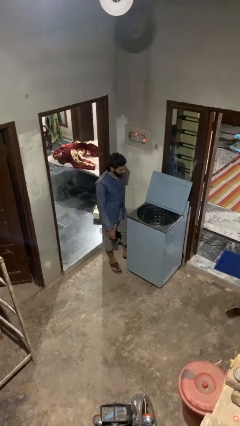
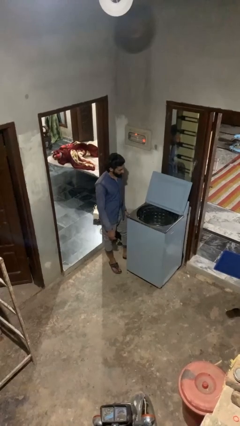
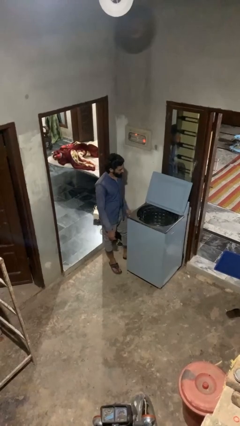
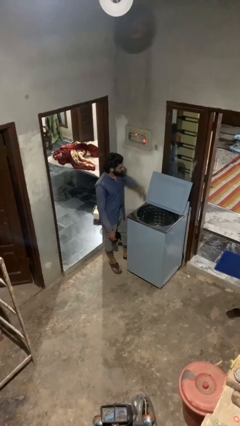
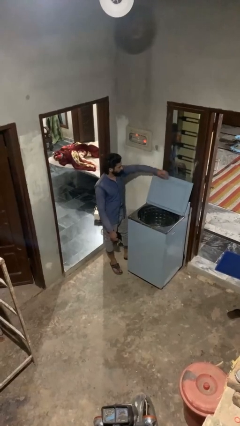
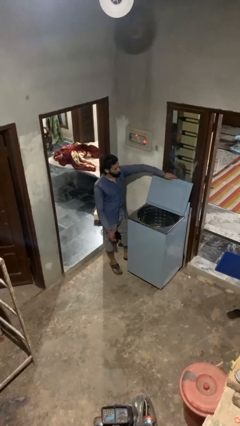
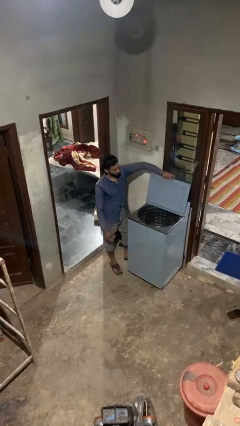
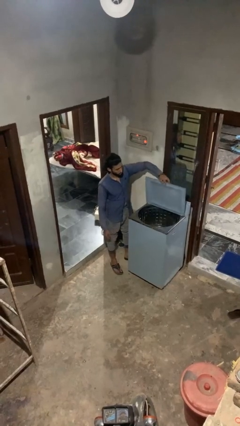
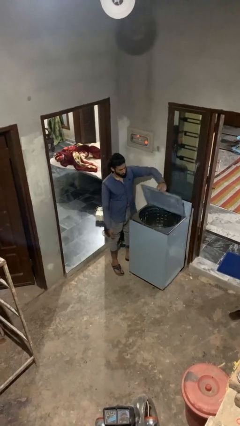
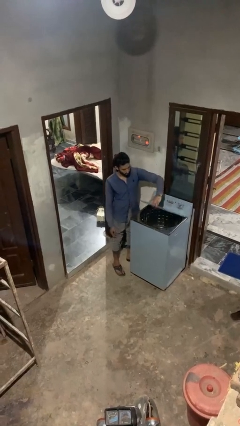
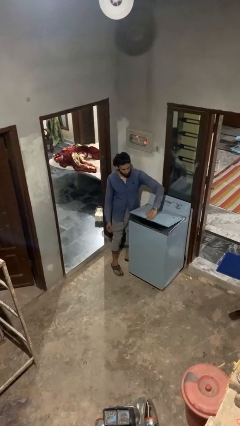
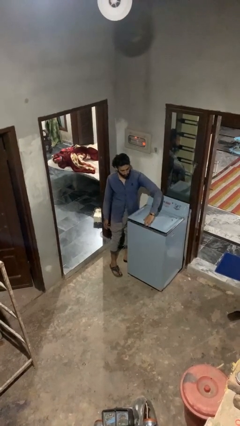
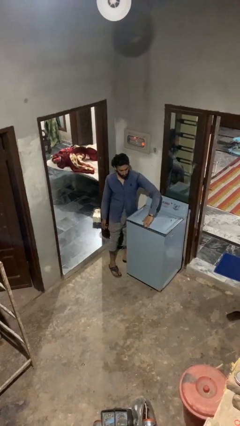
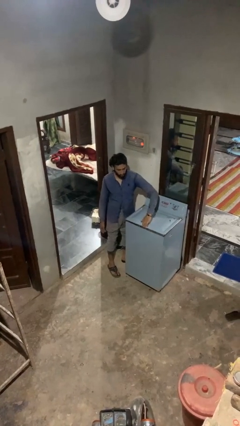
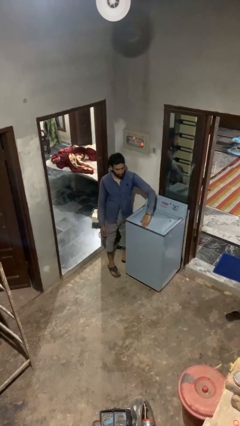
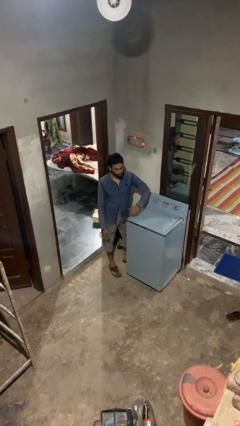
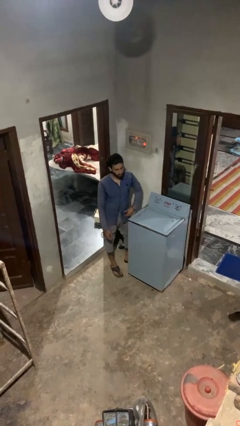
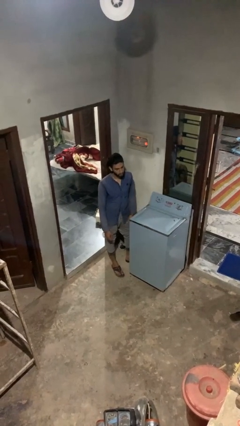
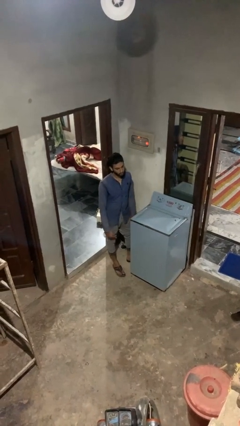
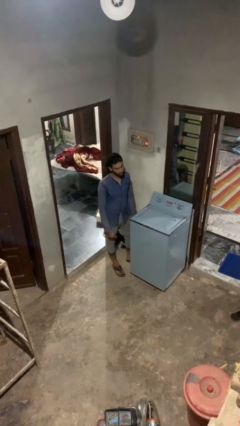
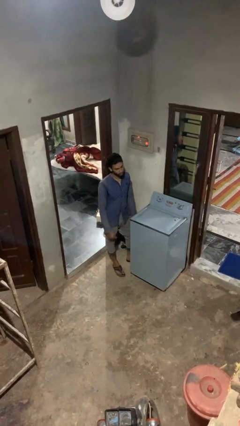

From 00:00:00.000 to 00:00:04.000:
person closes clothes washer

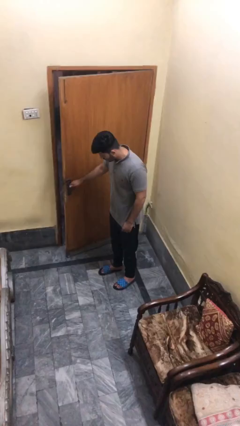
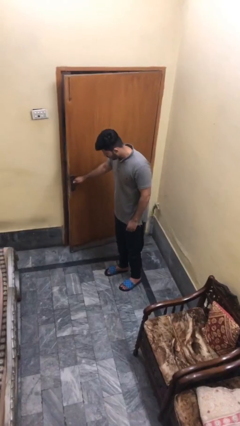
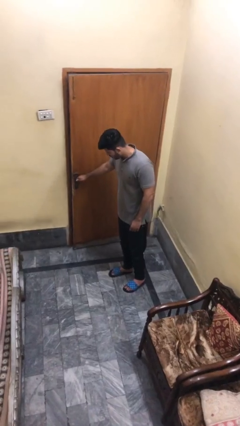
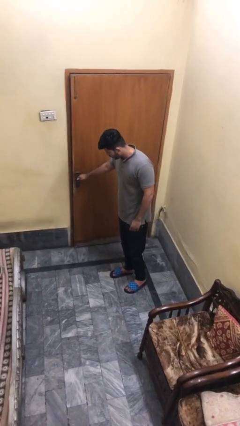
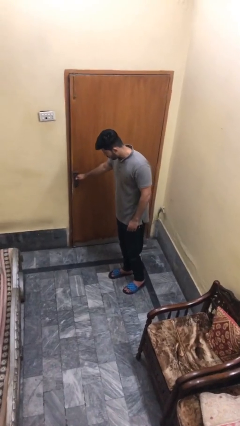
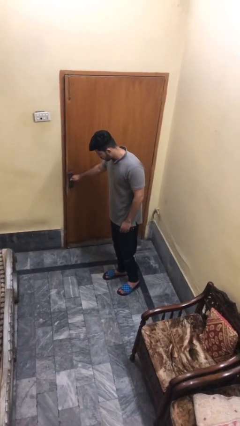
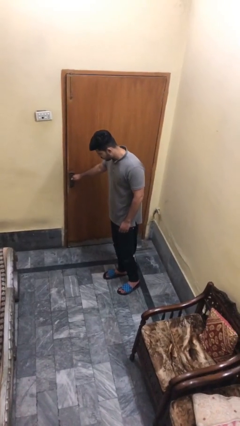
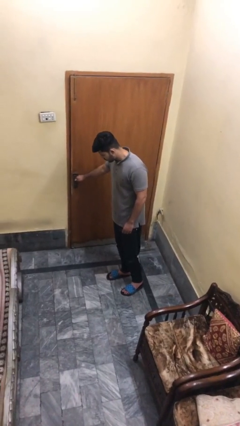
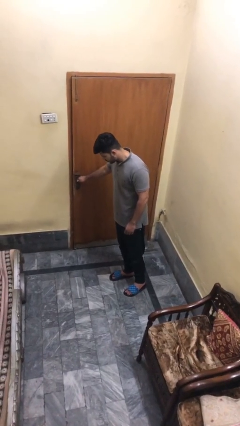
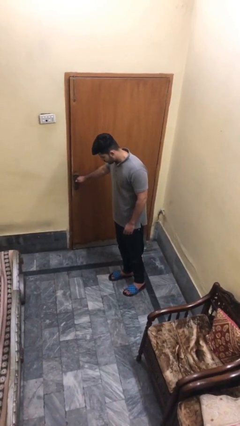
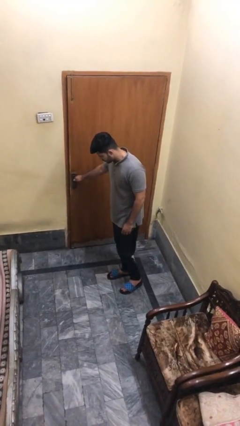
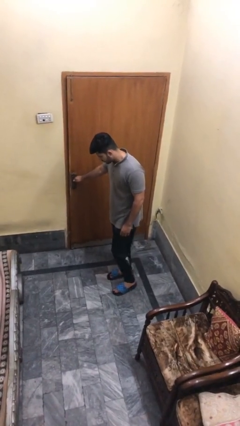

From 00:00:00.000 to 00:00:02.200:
person closes facility door

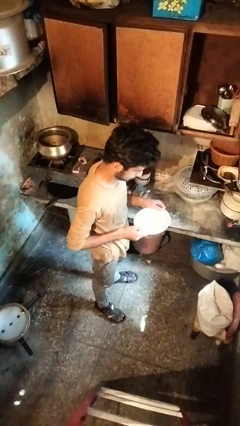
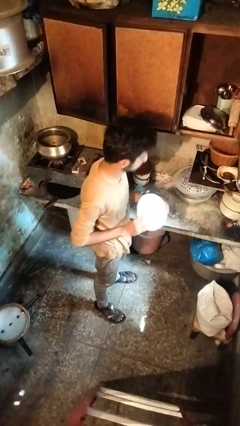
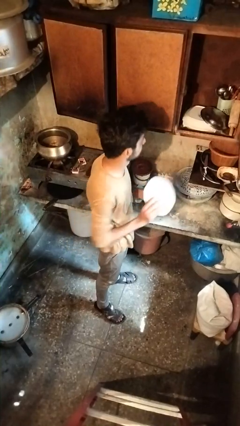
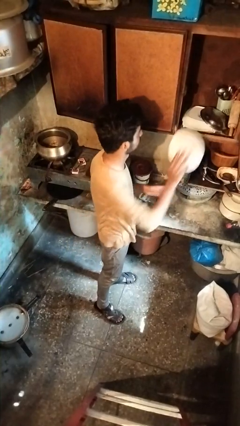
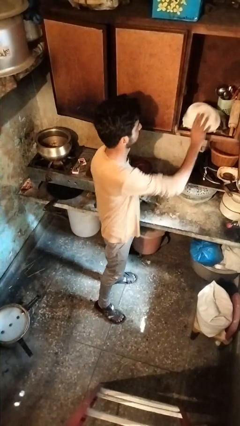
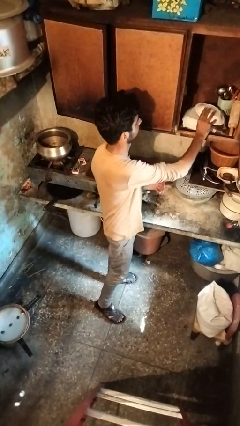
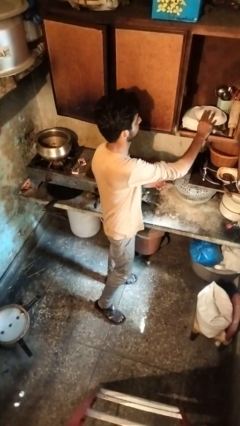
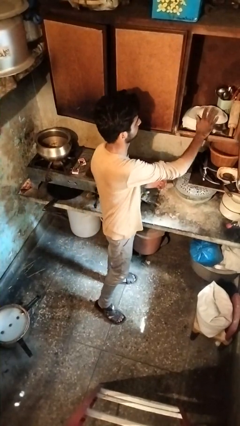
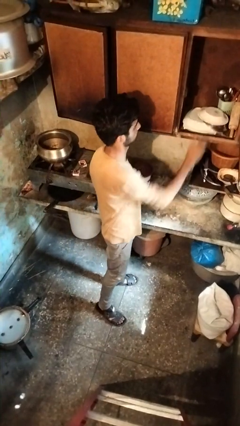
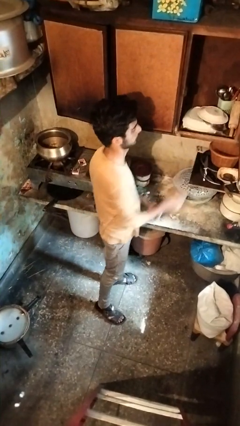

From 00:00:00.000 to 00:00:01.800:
person puts down object into cabinet

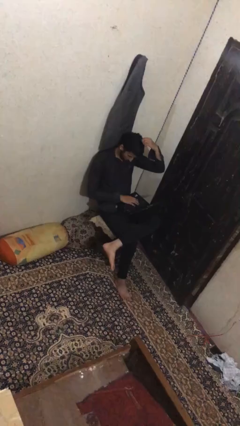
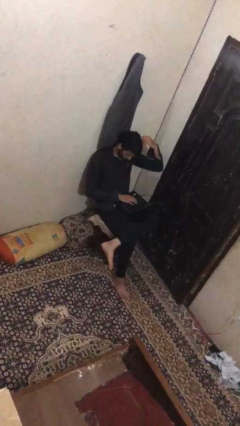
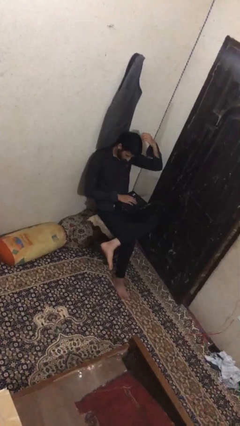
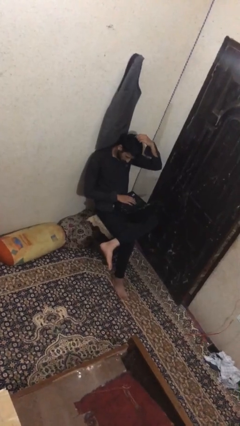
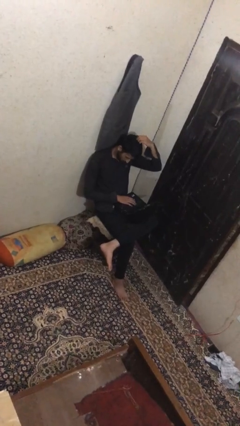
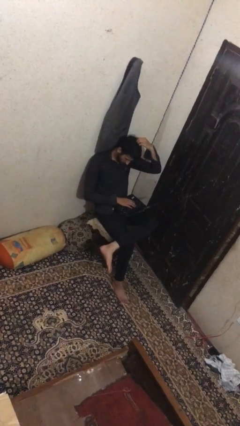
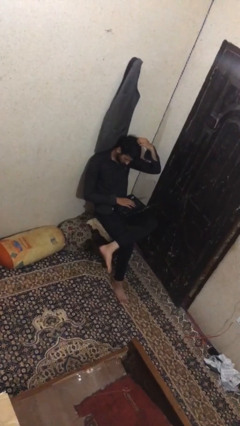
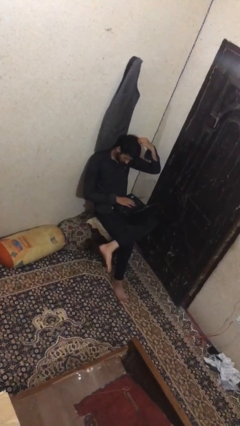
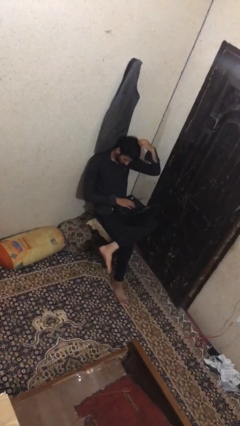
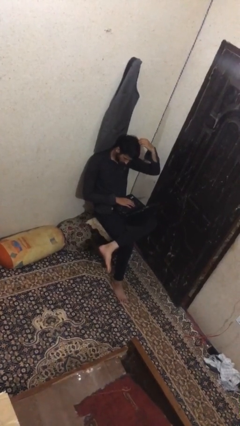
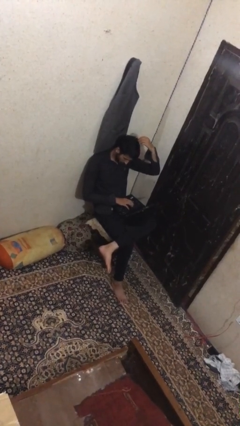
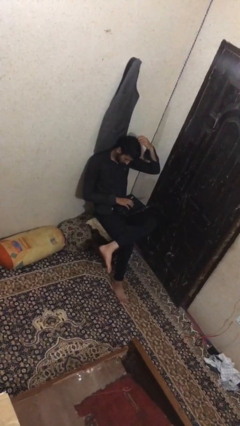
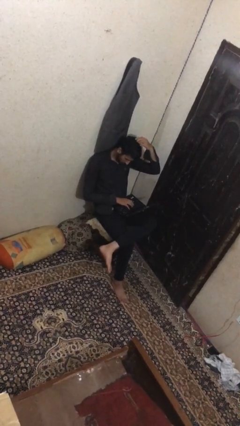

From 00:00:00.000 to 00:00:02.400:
person interacts with laptop

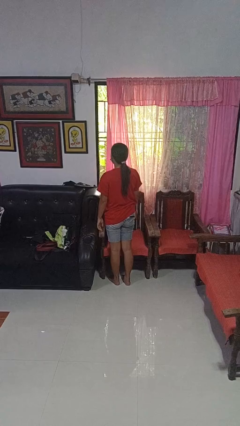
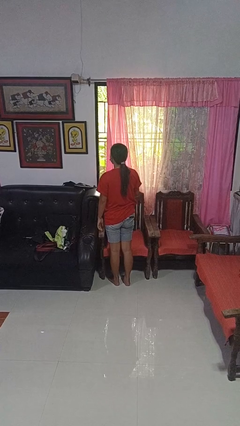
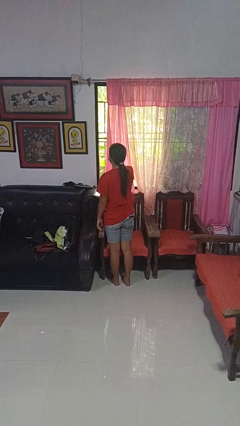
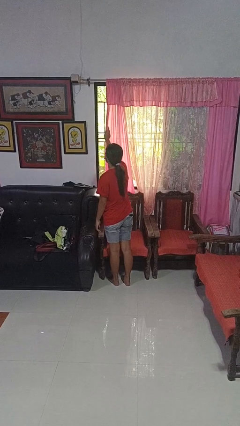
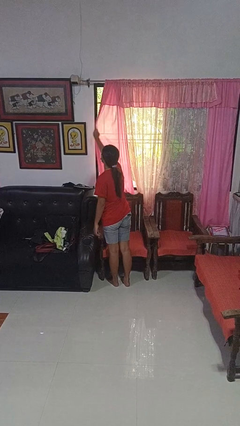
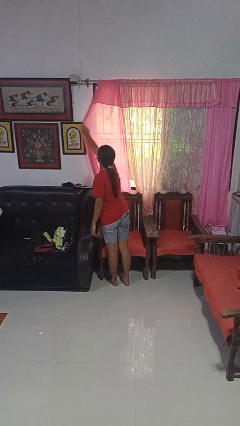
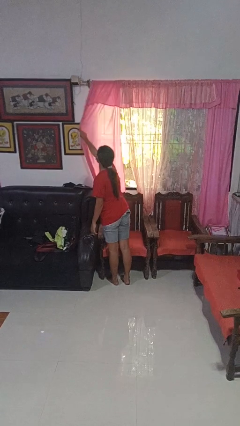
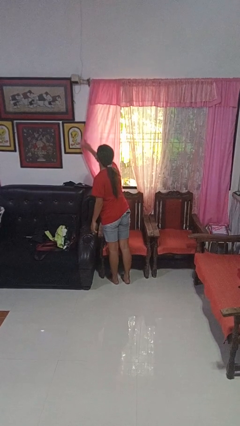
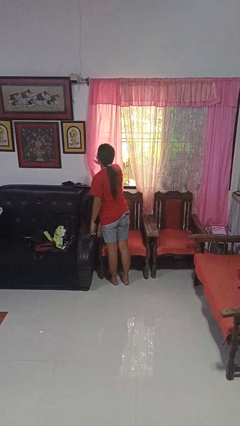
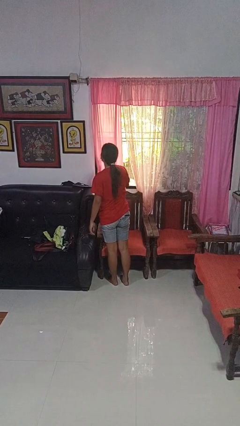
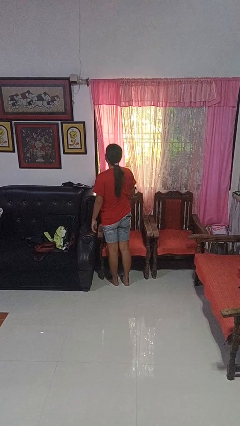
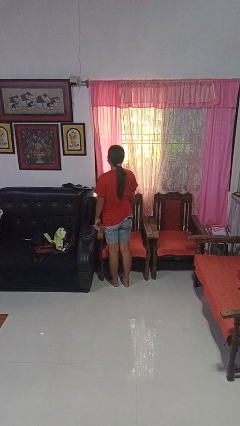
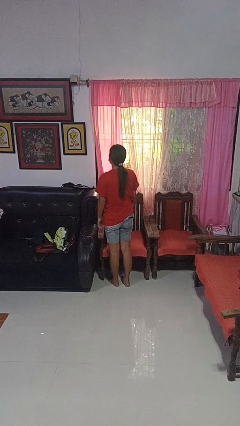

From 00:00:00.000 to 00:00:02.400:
person closes curtains

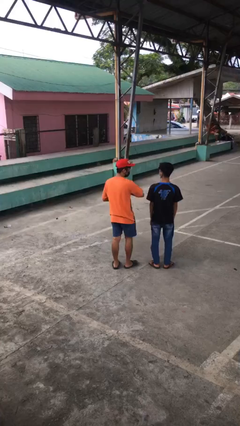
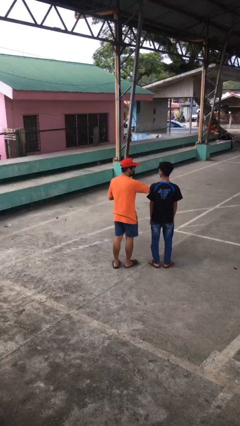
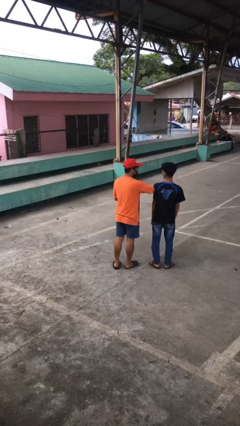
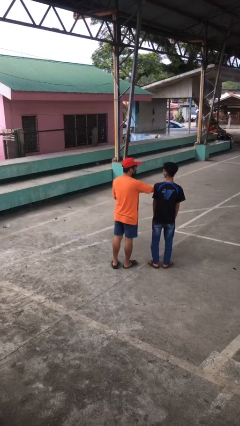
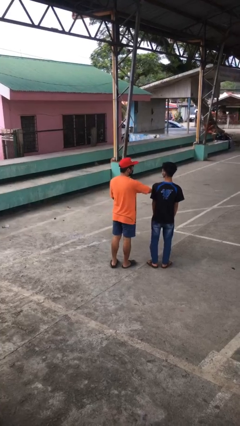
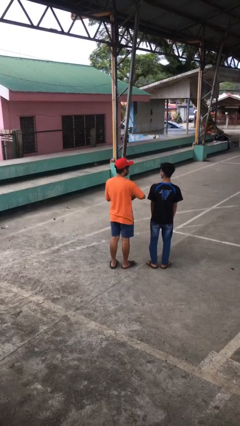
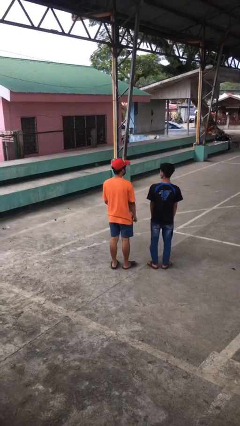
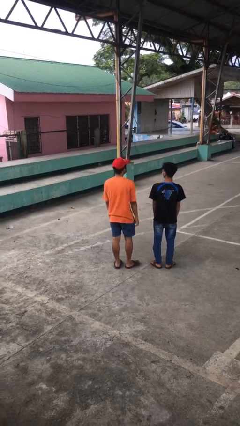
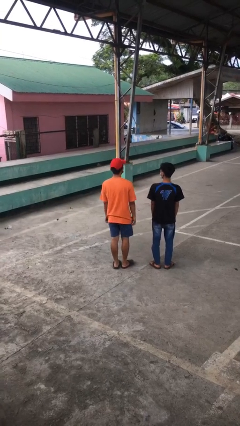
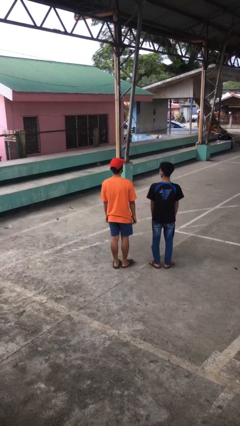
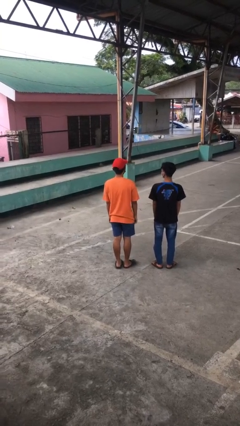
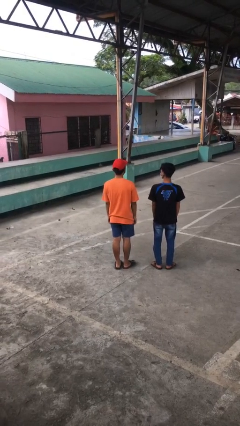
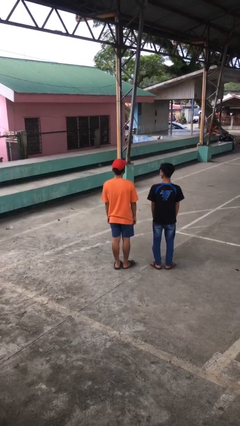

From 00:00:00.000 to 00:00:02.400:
person nudges person with elbow

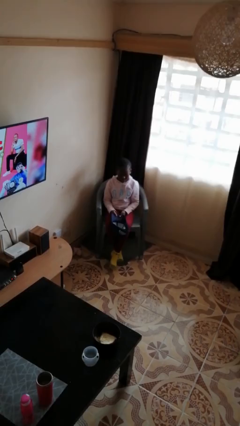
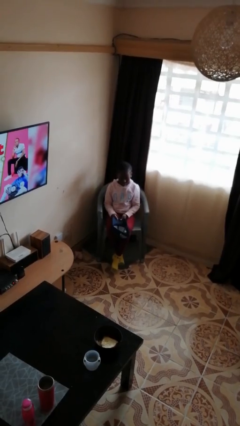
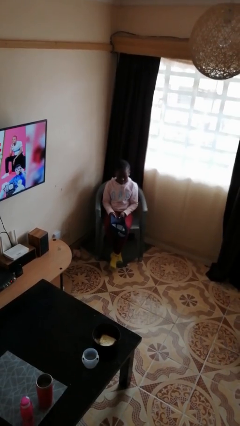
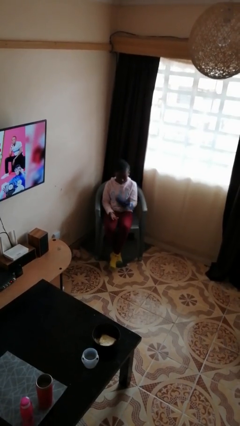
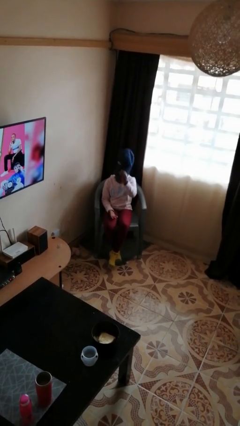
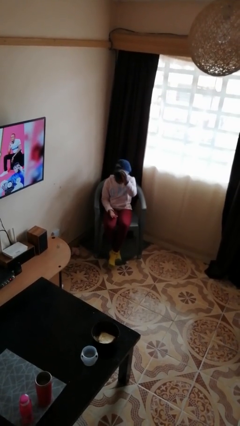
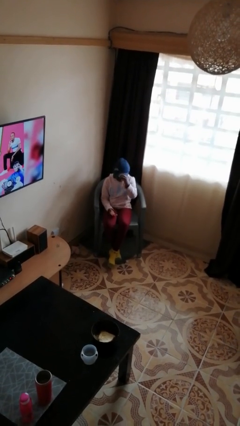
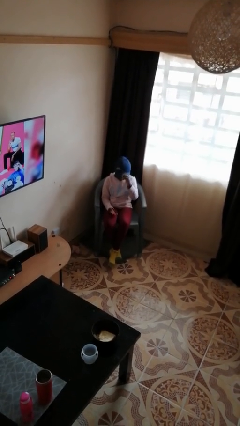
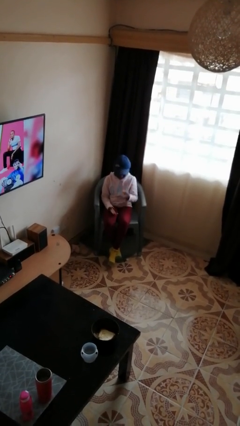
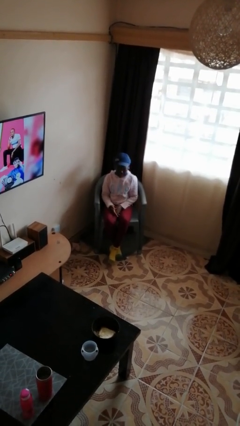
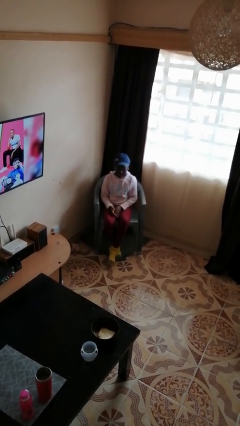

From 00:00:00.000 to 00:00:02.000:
person puts on hat
